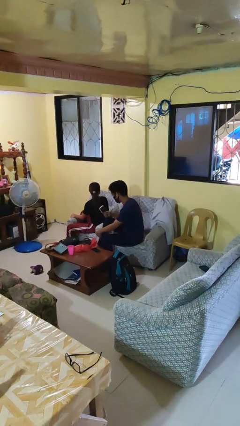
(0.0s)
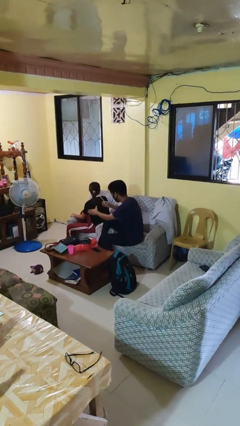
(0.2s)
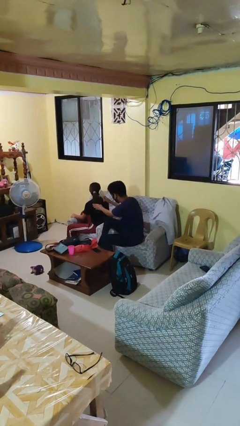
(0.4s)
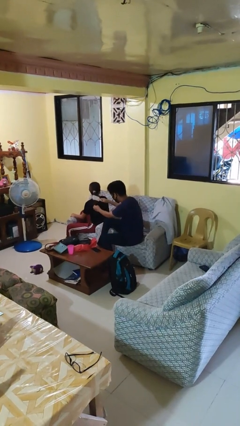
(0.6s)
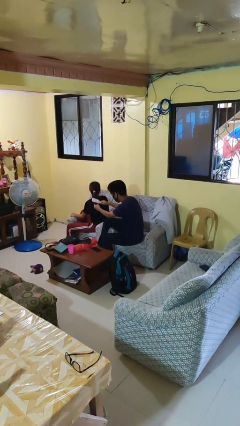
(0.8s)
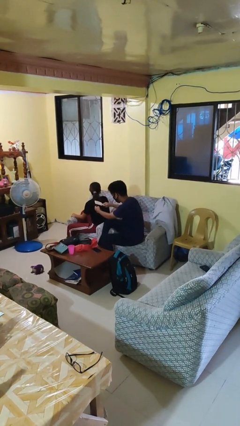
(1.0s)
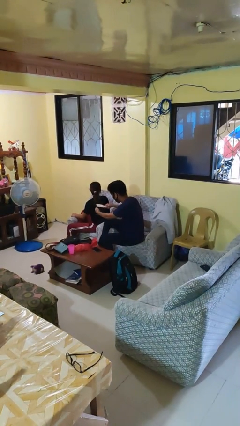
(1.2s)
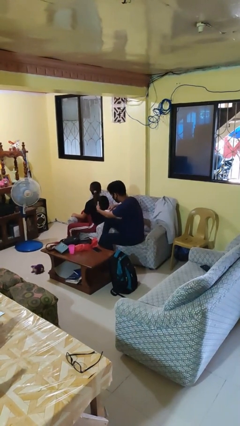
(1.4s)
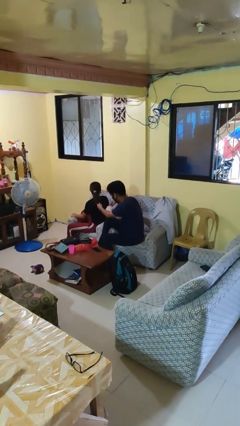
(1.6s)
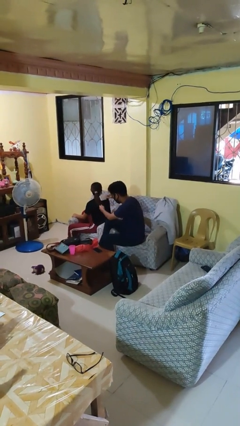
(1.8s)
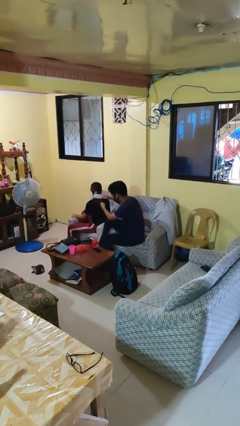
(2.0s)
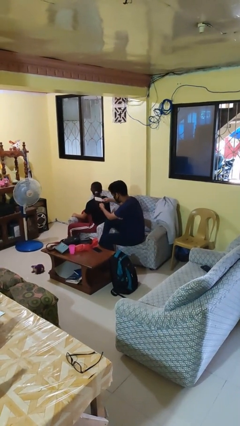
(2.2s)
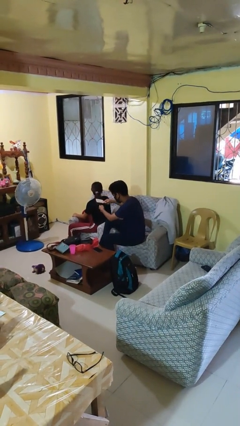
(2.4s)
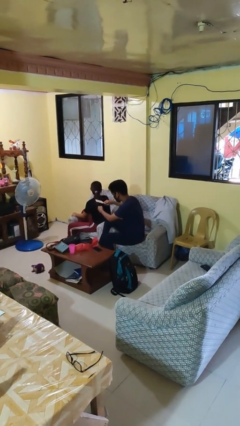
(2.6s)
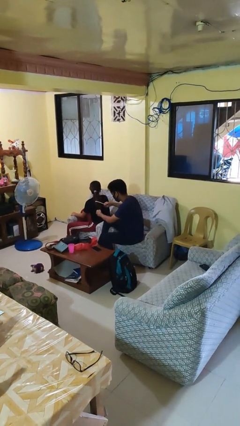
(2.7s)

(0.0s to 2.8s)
person brushes hair of person

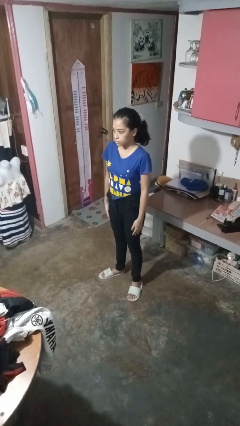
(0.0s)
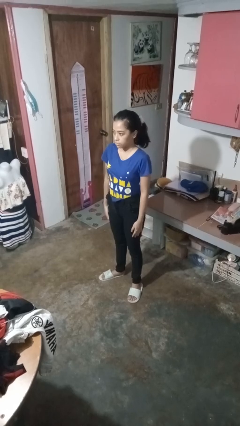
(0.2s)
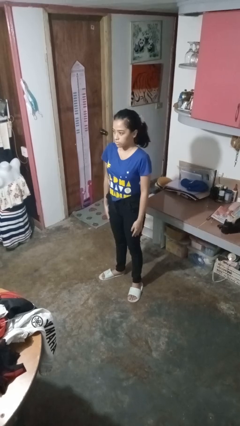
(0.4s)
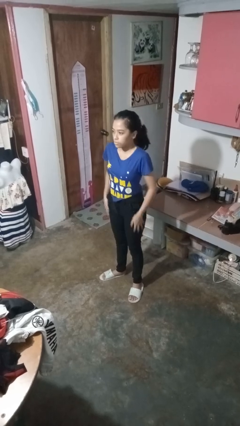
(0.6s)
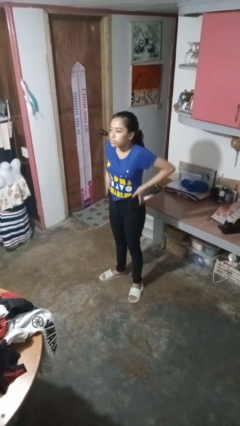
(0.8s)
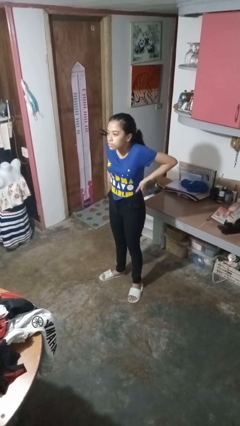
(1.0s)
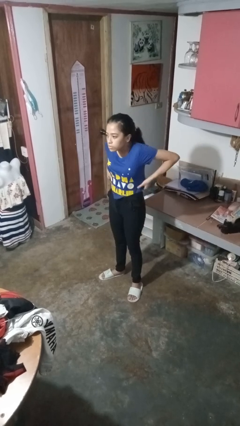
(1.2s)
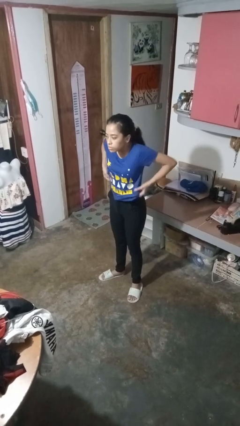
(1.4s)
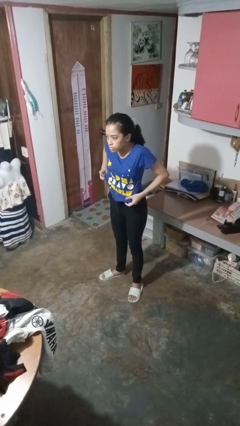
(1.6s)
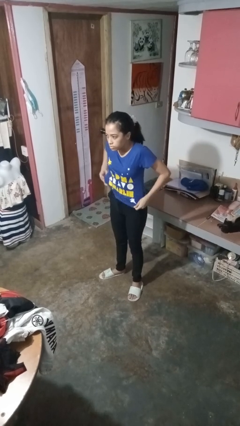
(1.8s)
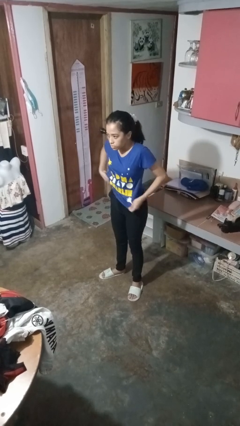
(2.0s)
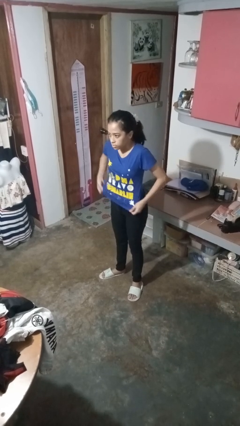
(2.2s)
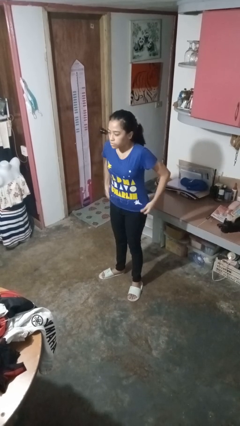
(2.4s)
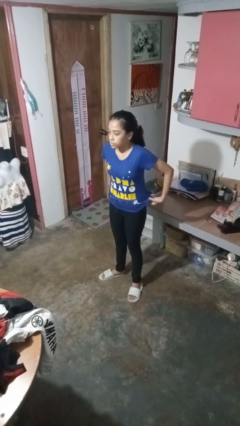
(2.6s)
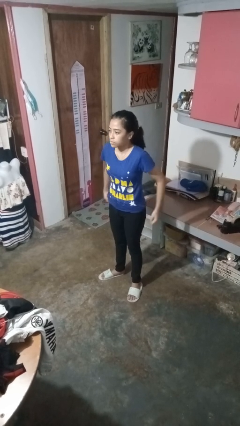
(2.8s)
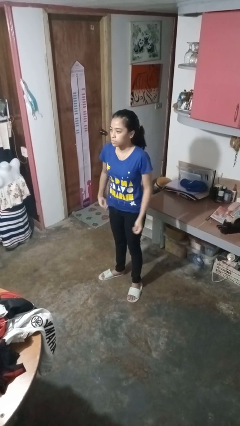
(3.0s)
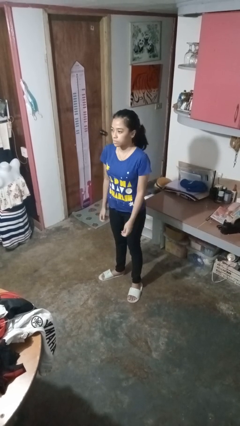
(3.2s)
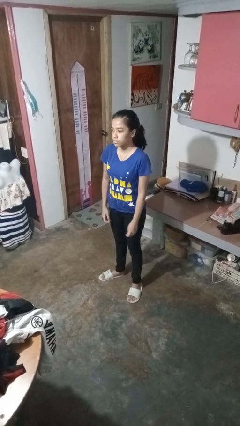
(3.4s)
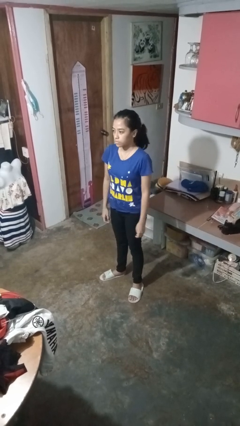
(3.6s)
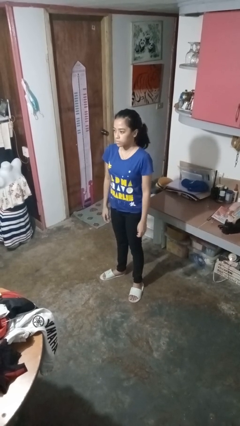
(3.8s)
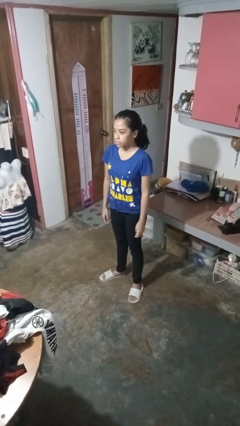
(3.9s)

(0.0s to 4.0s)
person untucks shirt

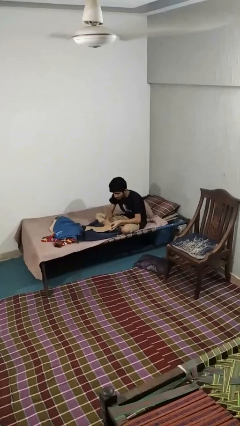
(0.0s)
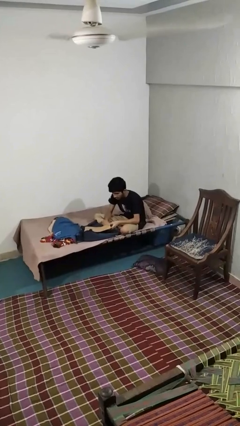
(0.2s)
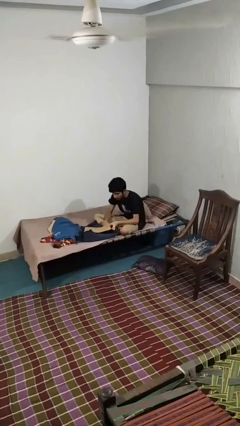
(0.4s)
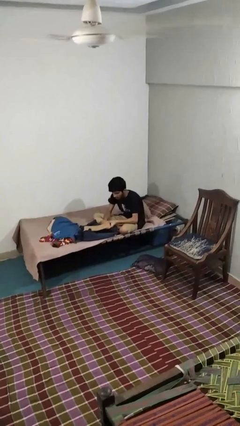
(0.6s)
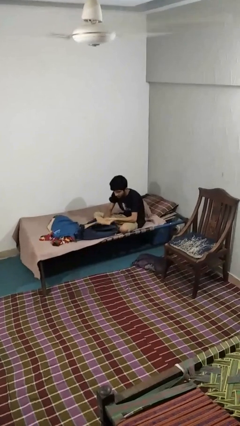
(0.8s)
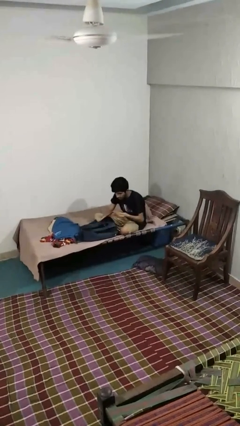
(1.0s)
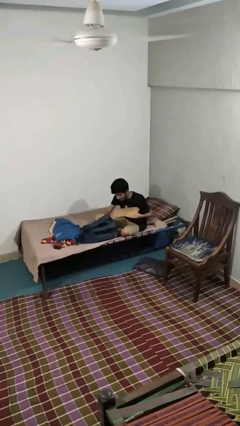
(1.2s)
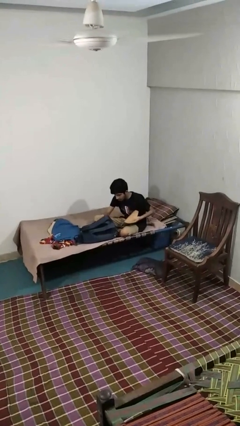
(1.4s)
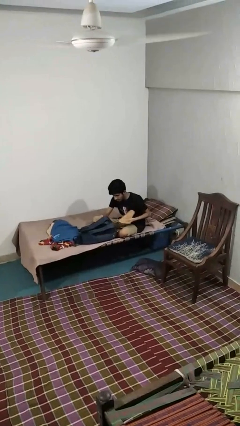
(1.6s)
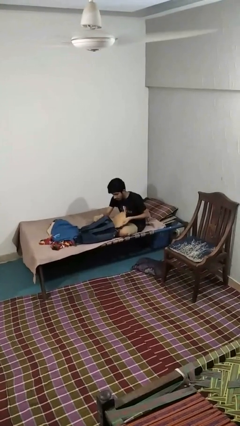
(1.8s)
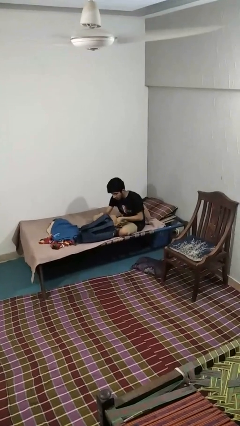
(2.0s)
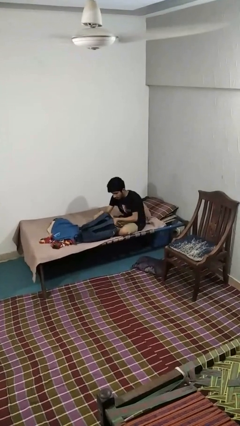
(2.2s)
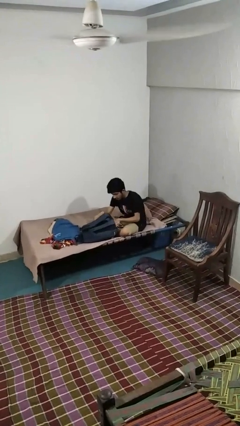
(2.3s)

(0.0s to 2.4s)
person puts object into backpack

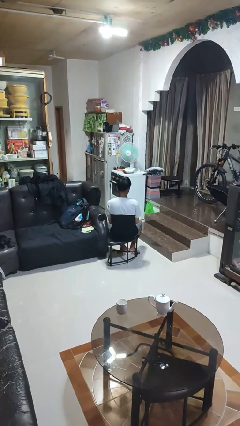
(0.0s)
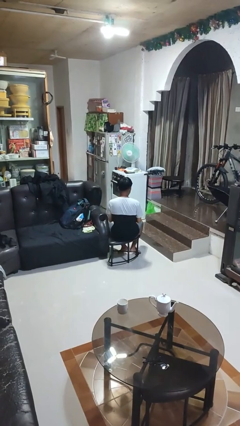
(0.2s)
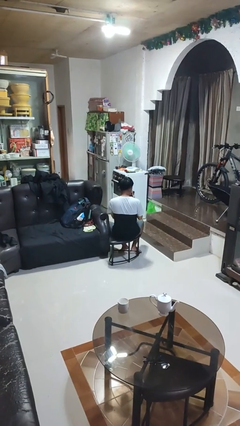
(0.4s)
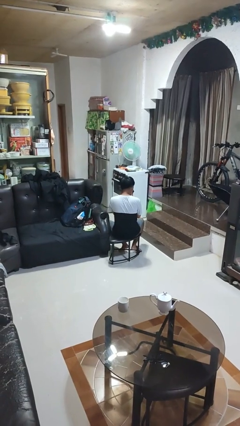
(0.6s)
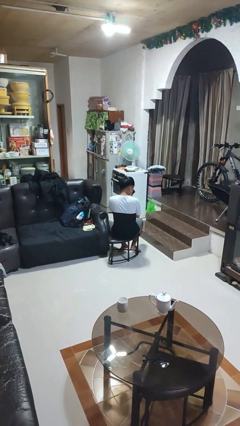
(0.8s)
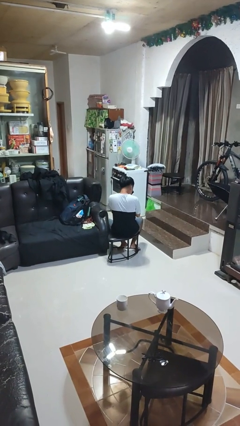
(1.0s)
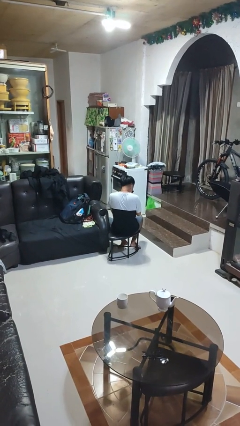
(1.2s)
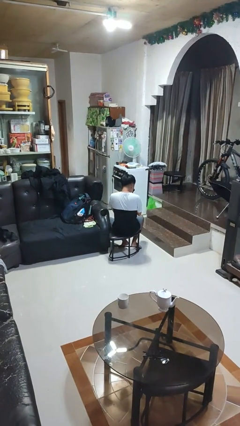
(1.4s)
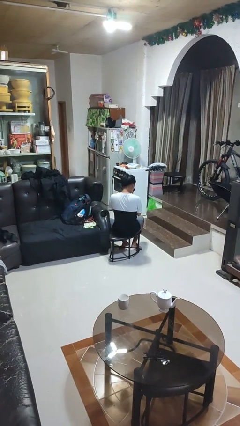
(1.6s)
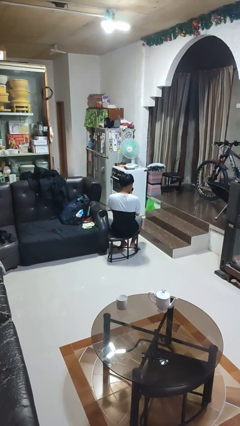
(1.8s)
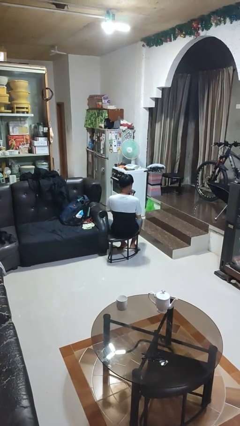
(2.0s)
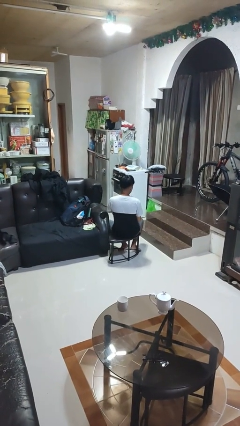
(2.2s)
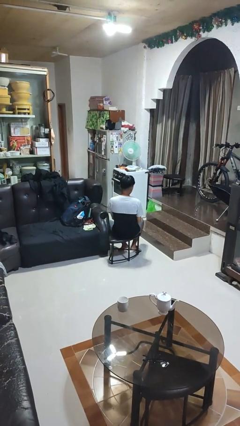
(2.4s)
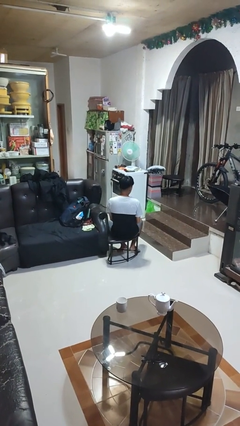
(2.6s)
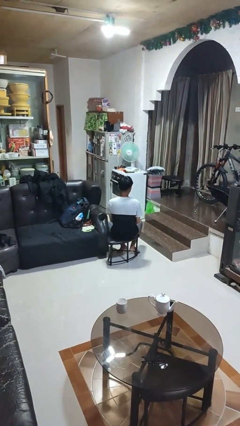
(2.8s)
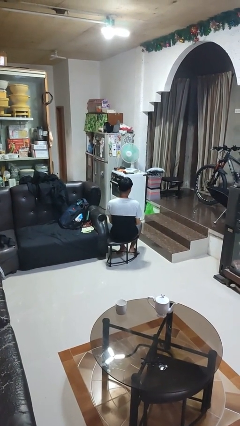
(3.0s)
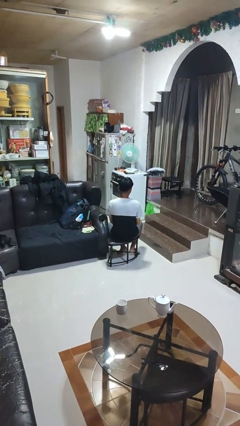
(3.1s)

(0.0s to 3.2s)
person blows nose

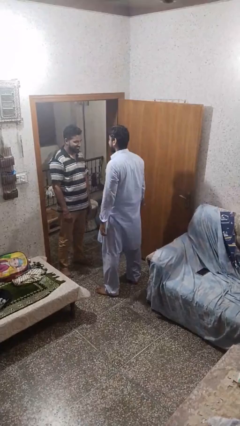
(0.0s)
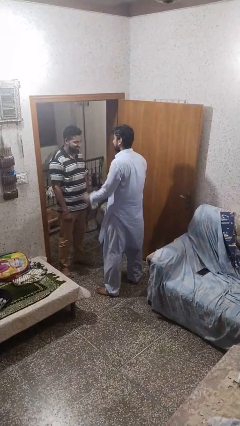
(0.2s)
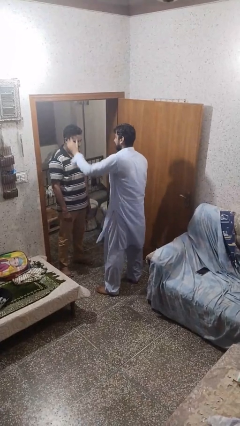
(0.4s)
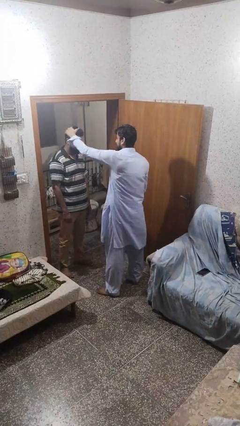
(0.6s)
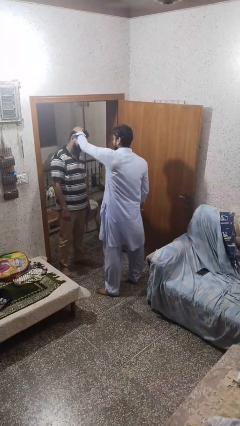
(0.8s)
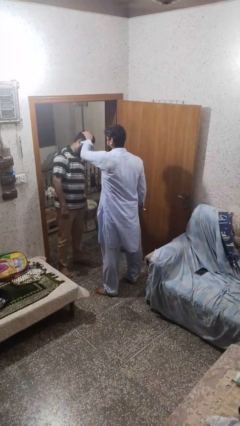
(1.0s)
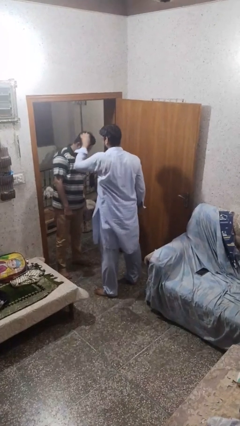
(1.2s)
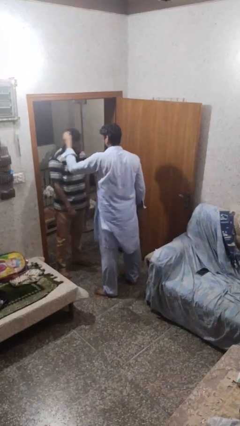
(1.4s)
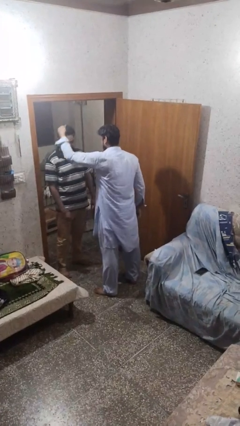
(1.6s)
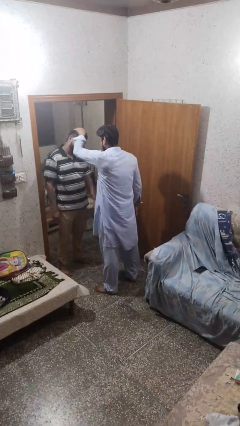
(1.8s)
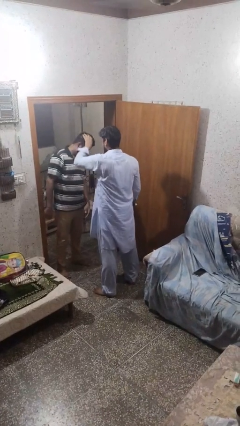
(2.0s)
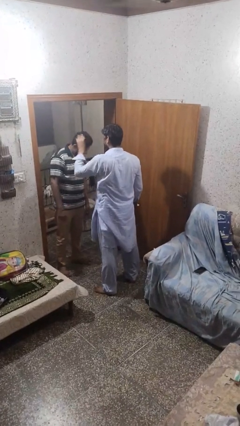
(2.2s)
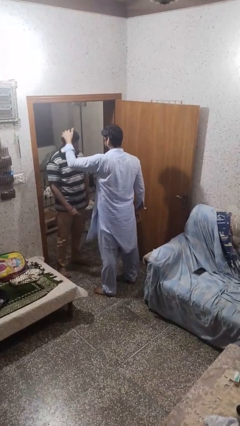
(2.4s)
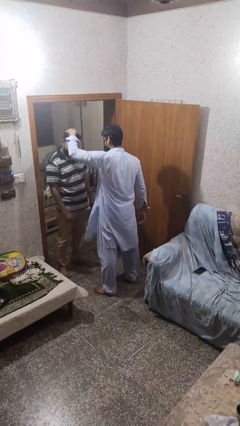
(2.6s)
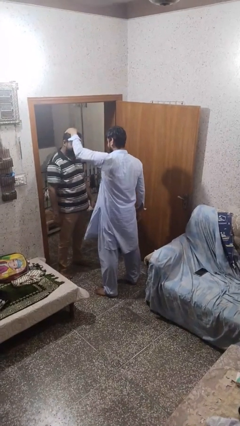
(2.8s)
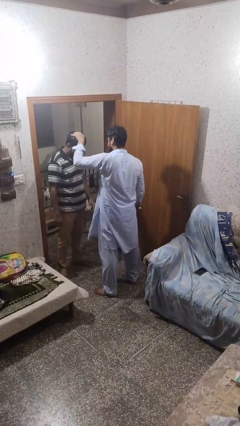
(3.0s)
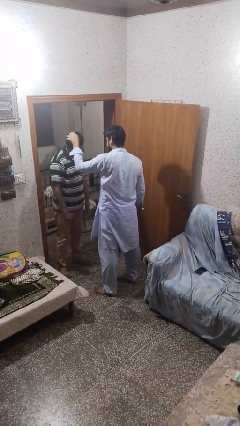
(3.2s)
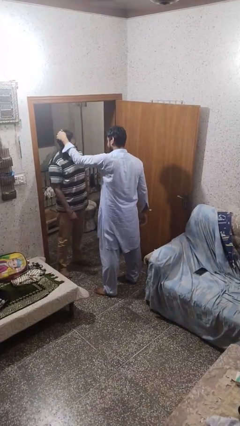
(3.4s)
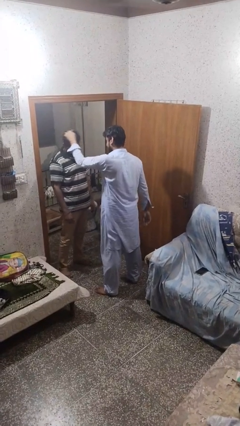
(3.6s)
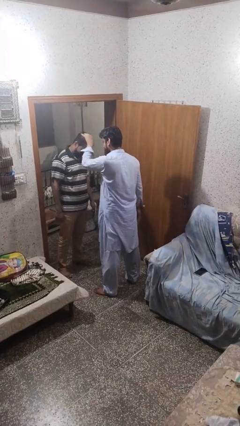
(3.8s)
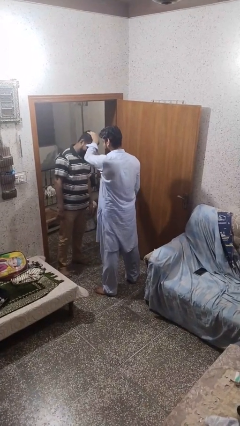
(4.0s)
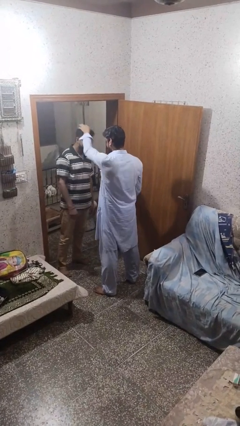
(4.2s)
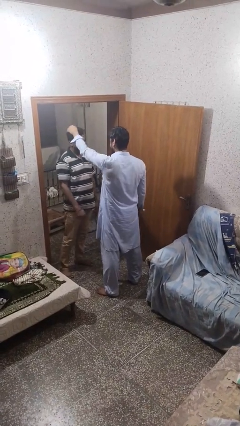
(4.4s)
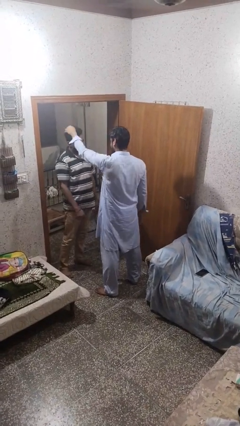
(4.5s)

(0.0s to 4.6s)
person grabs person by hair

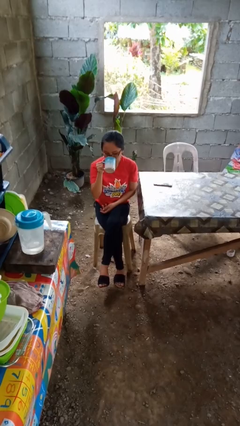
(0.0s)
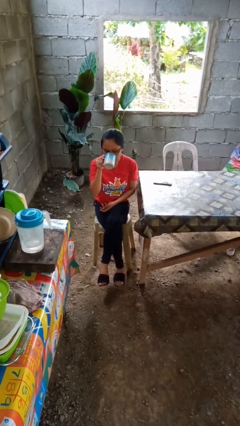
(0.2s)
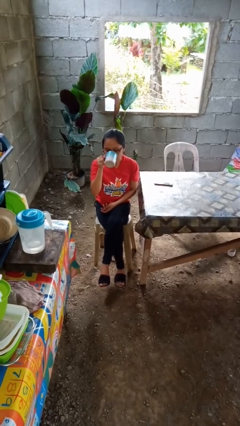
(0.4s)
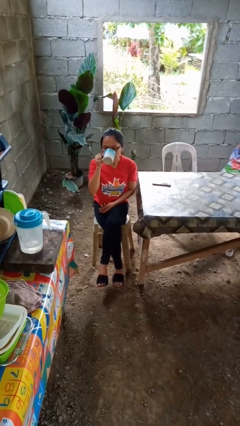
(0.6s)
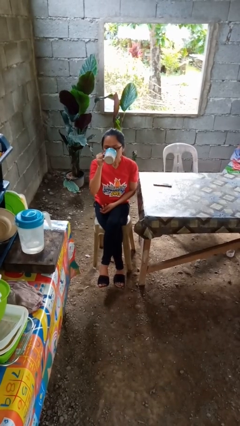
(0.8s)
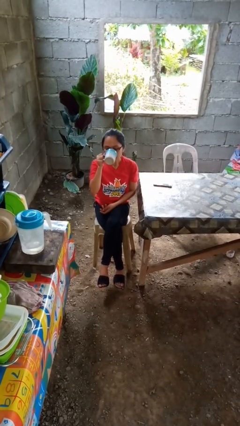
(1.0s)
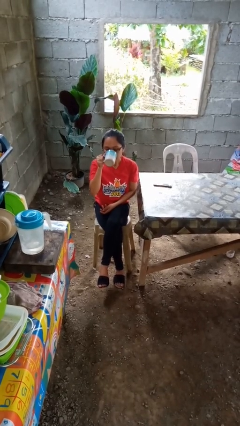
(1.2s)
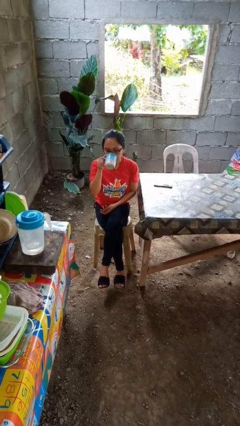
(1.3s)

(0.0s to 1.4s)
person drinks from mug
